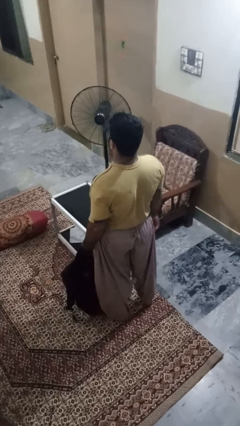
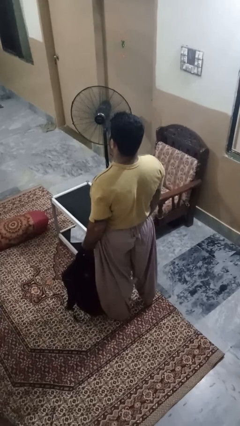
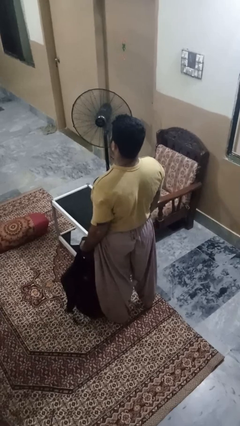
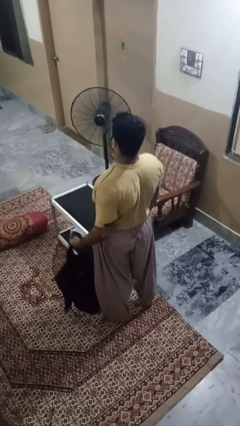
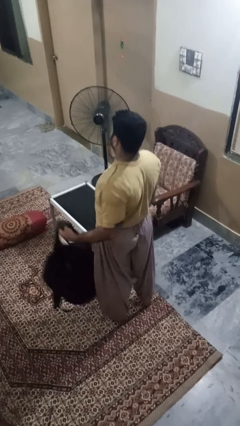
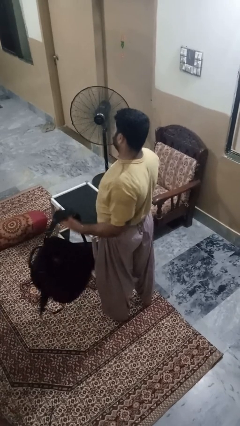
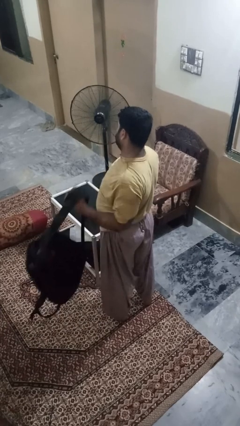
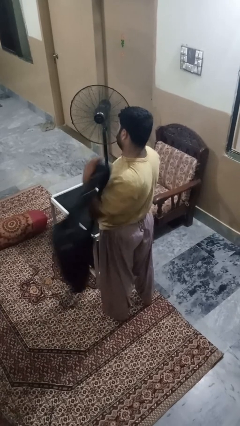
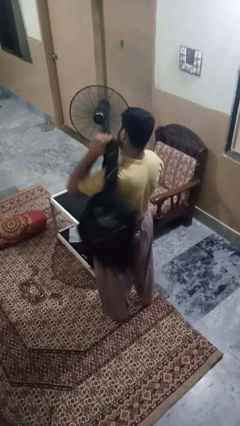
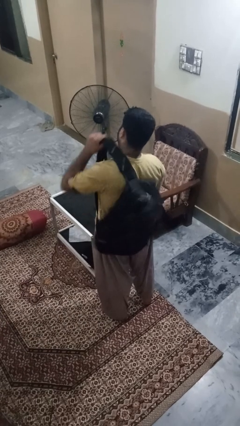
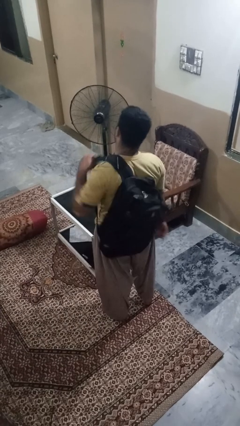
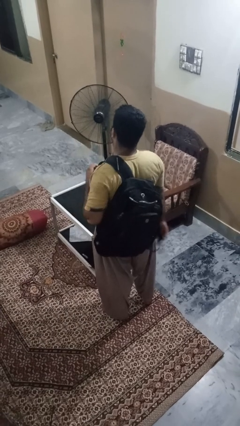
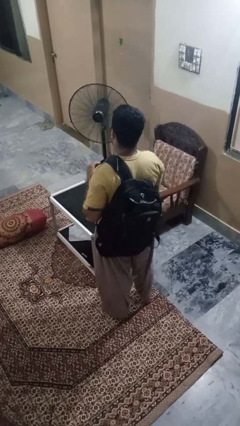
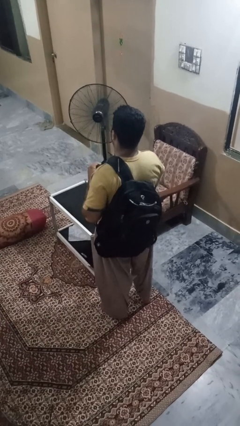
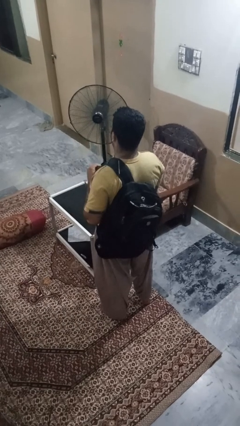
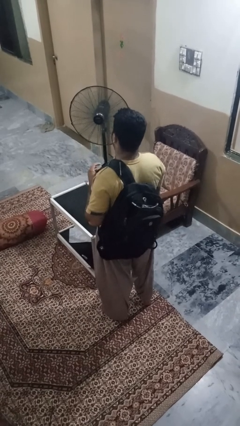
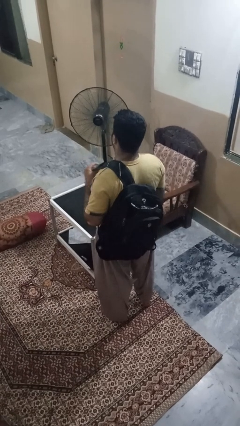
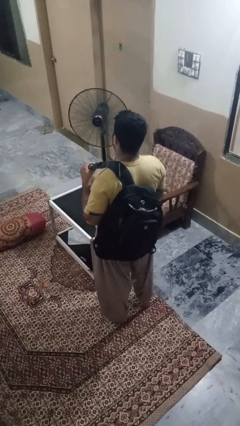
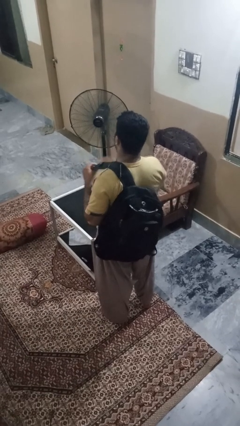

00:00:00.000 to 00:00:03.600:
person puts on backpack

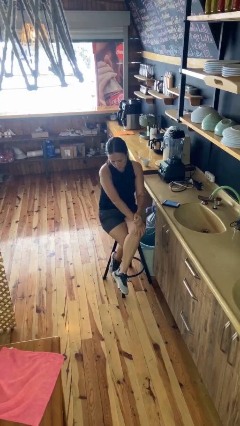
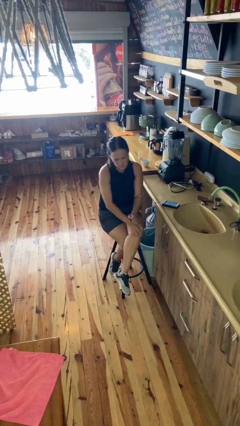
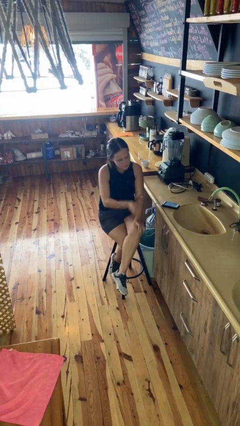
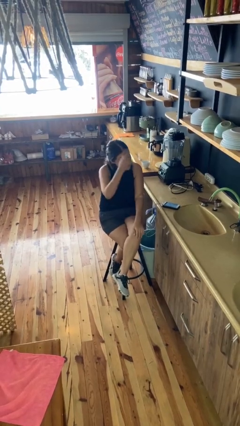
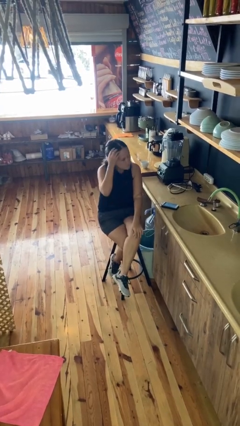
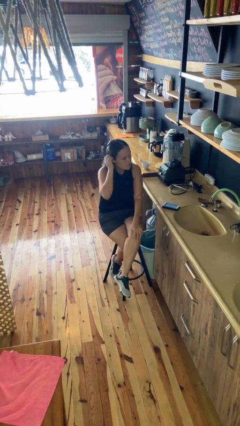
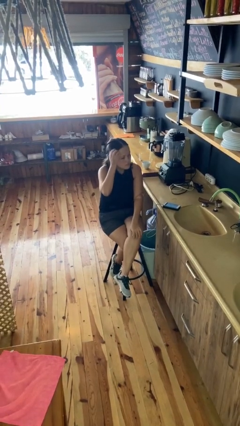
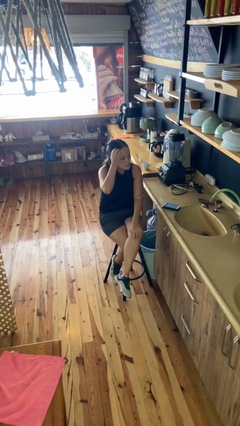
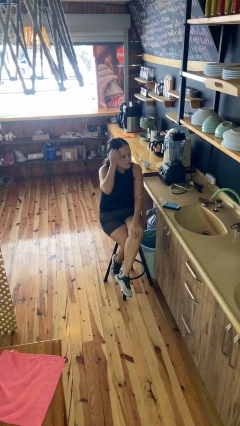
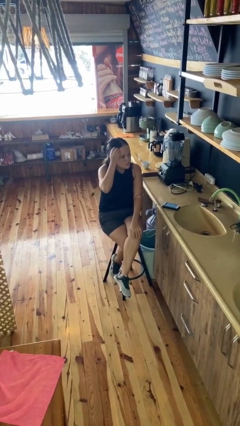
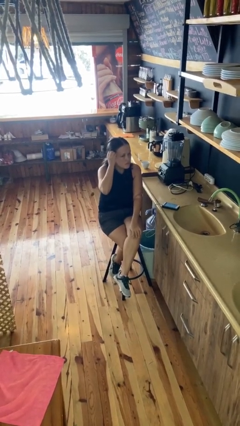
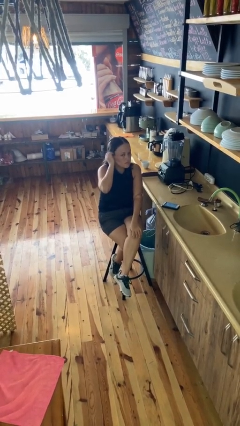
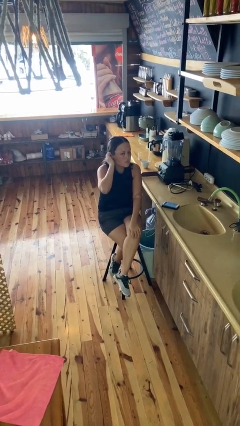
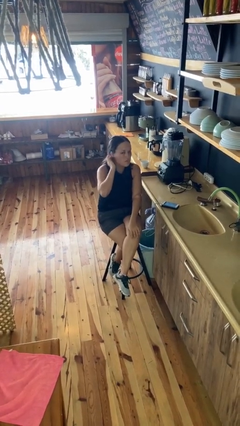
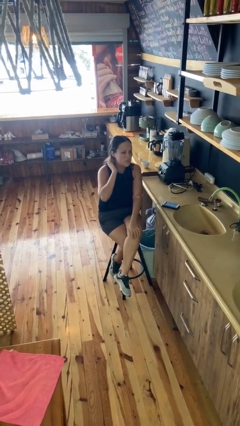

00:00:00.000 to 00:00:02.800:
person strokes hair

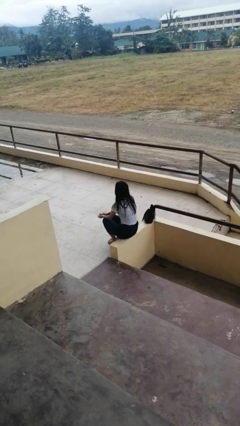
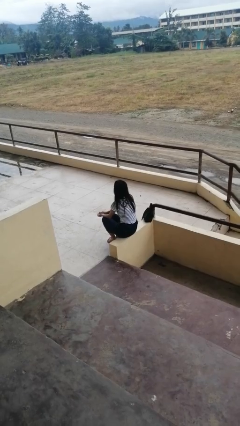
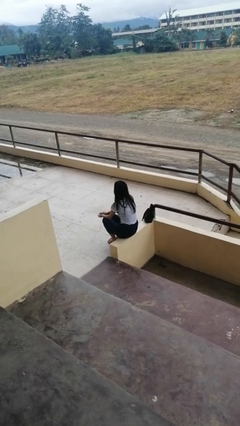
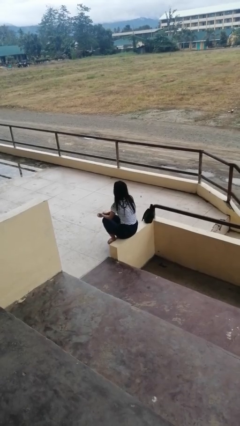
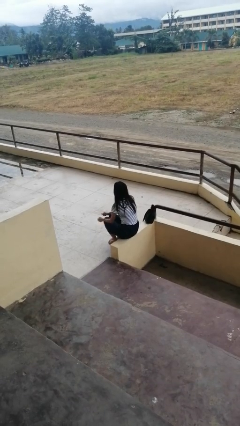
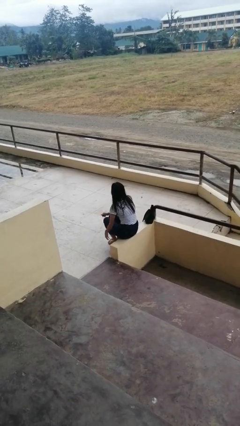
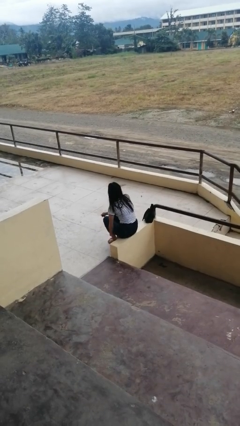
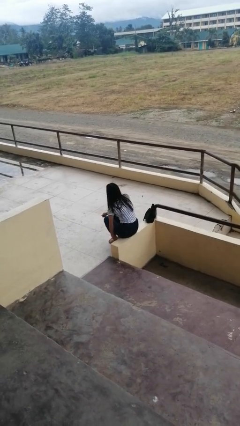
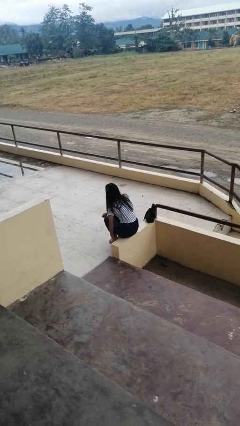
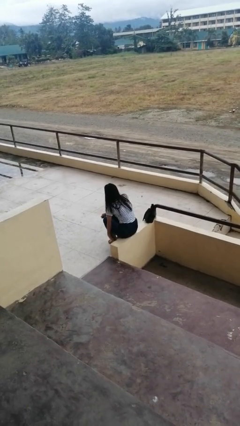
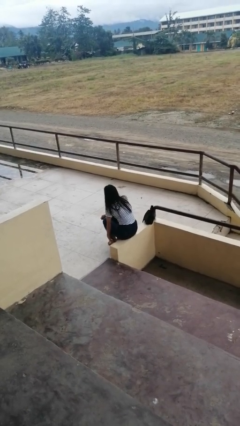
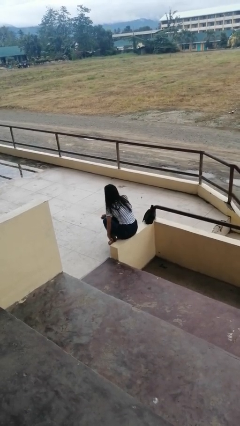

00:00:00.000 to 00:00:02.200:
person rubs foot

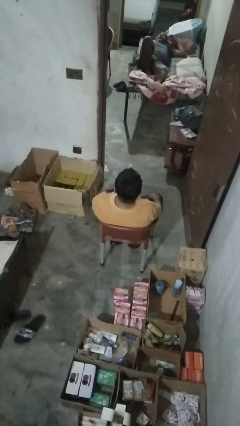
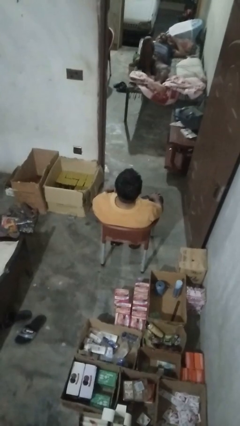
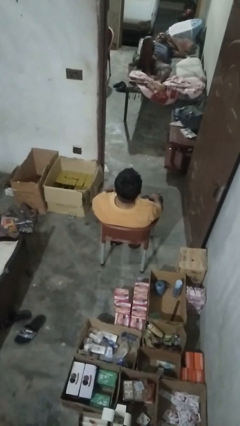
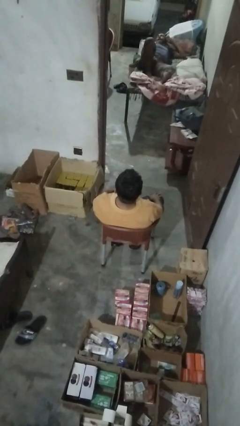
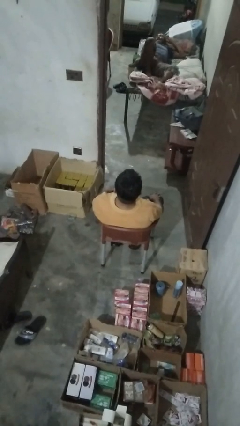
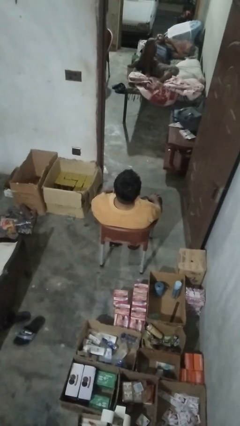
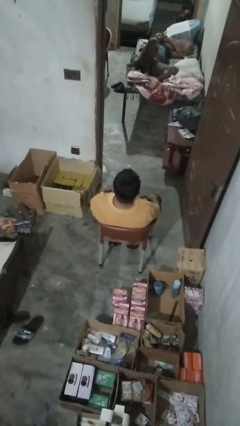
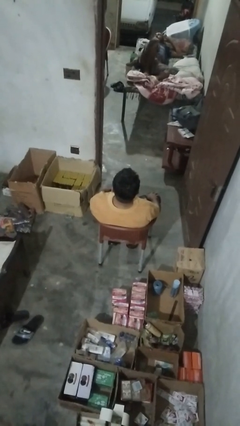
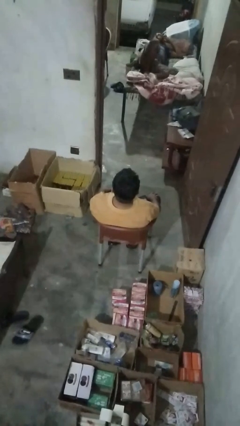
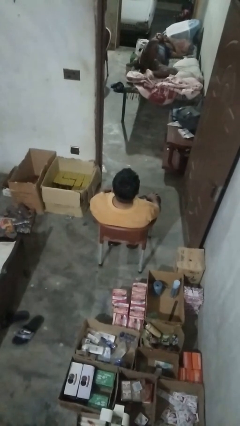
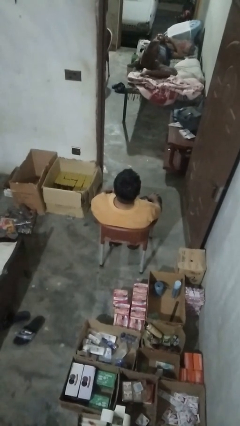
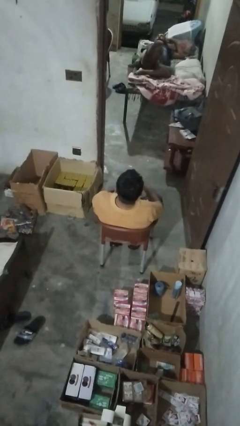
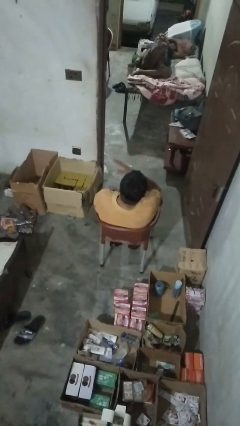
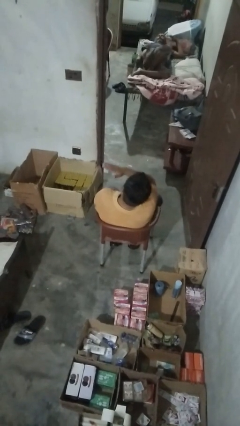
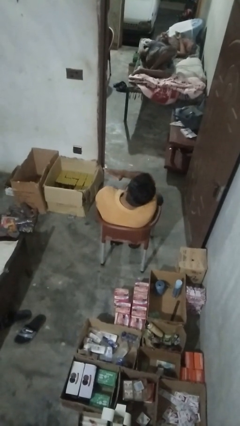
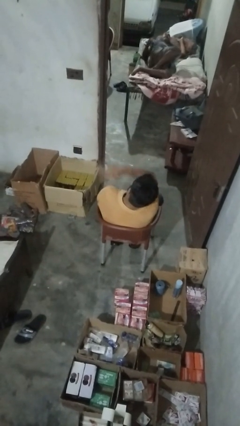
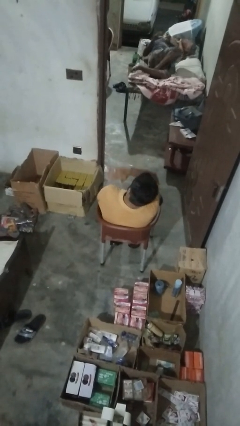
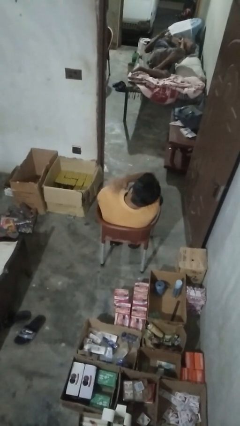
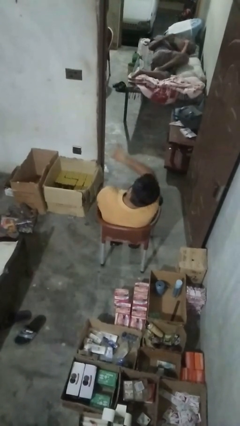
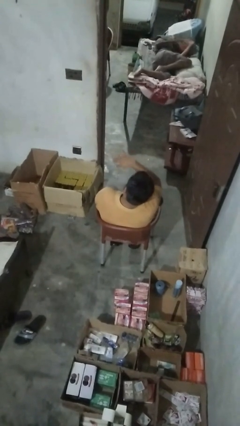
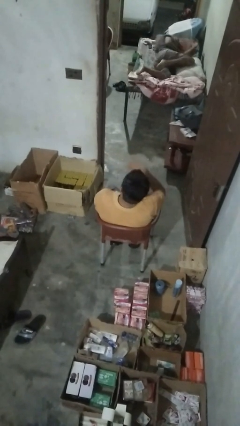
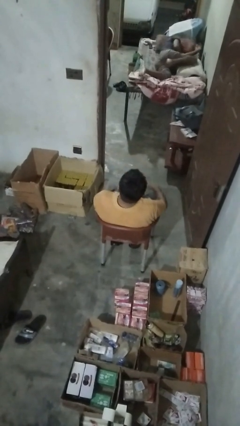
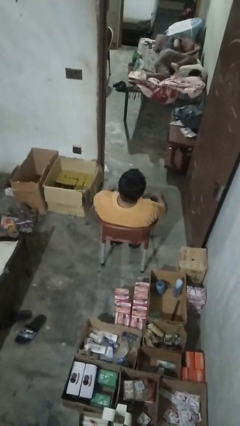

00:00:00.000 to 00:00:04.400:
person swats bug

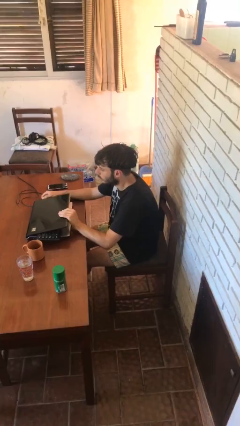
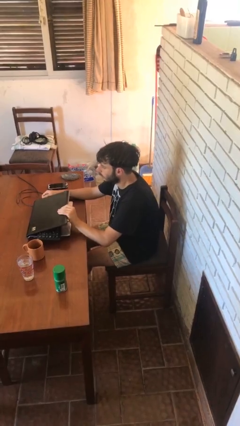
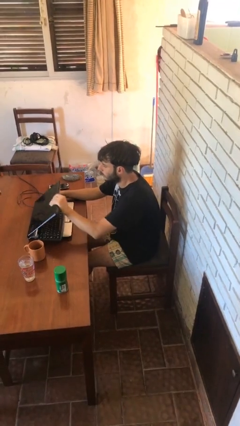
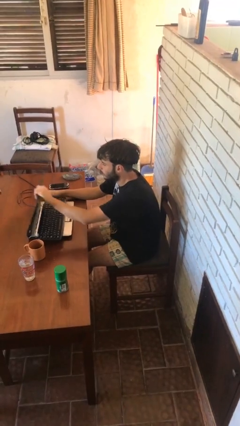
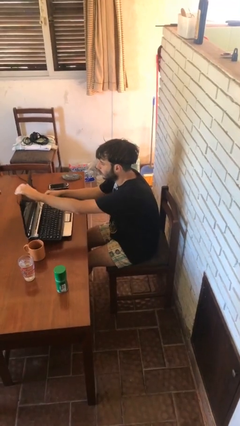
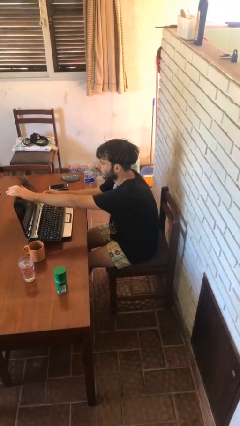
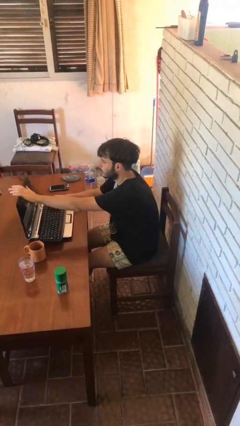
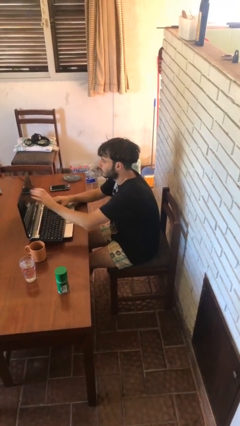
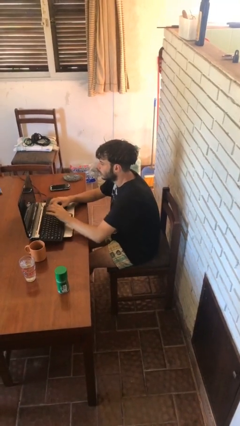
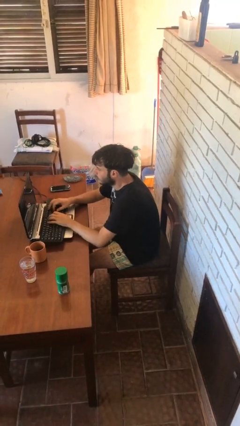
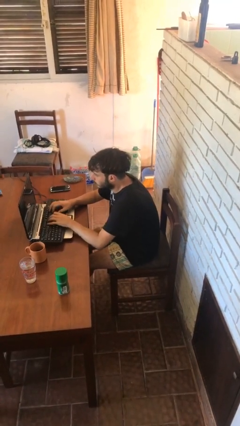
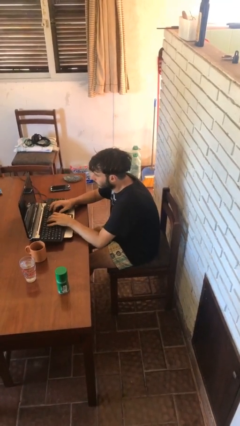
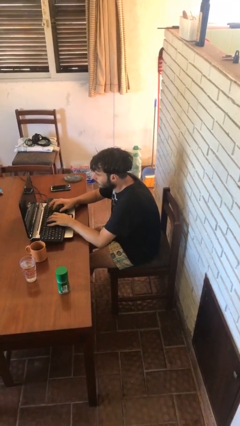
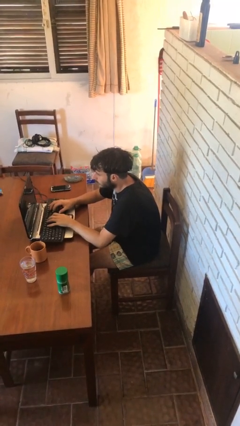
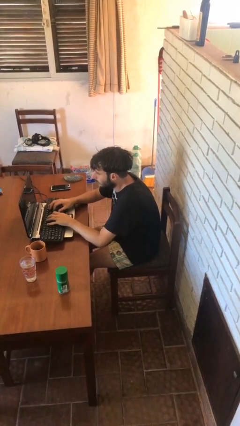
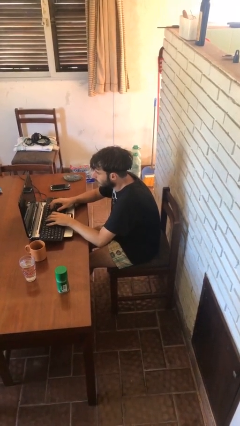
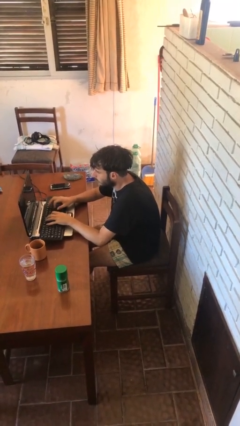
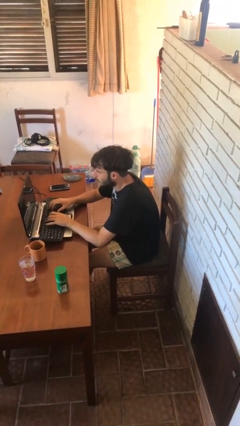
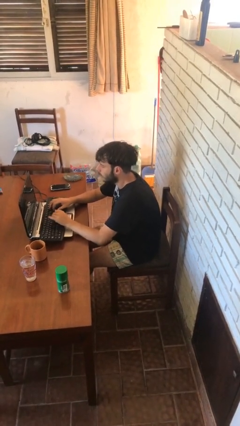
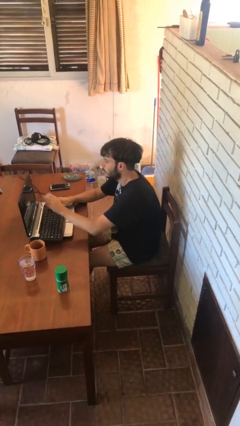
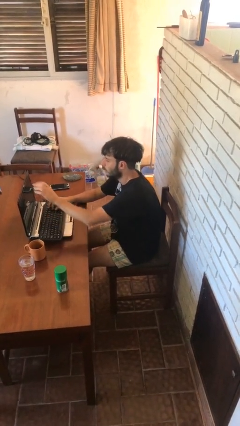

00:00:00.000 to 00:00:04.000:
person interacts with laptop

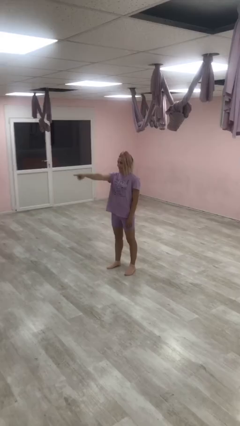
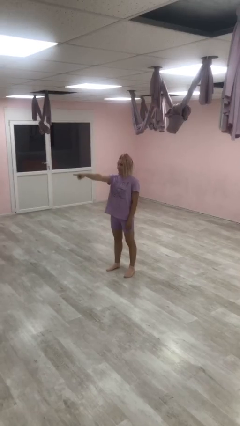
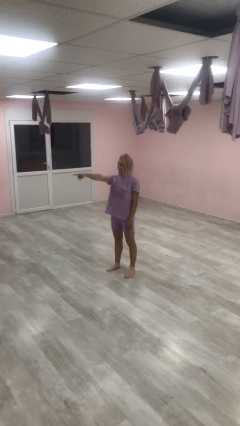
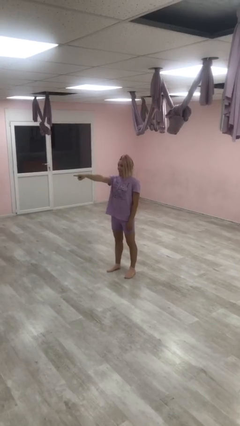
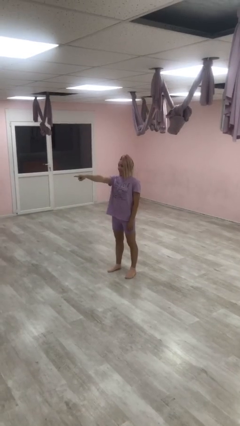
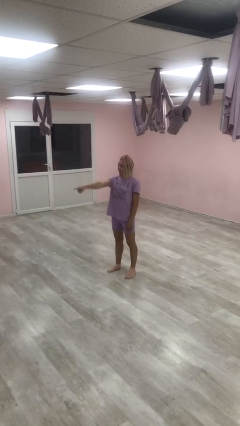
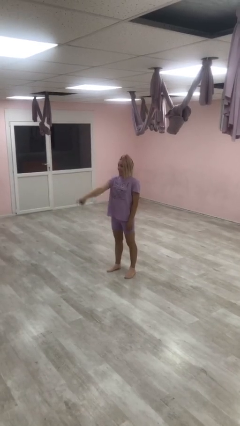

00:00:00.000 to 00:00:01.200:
person points at person
